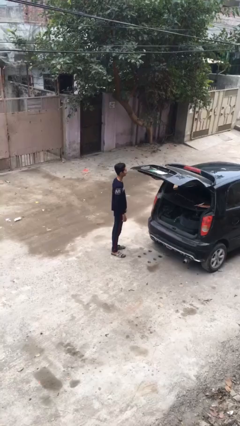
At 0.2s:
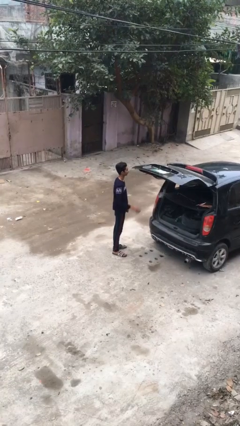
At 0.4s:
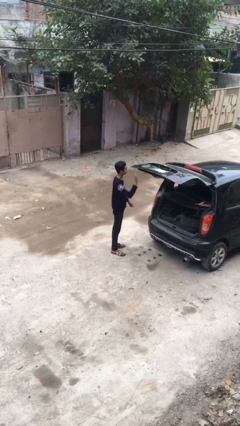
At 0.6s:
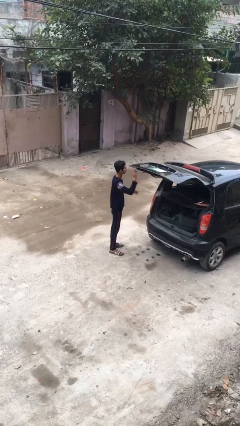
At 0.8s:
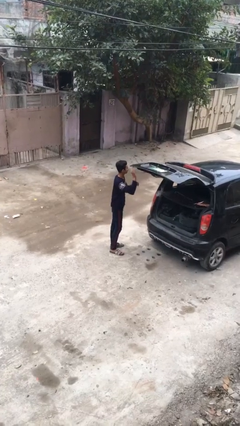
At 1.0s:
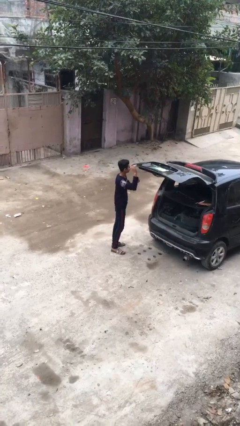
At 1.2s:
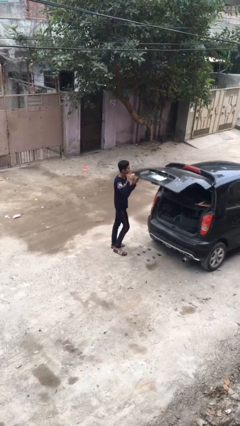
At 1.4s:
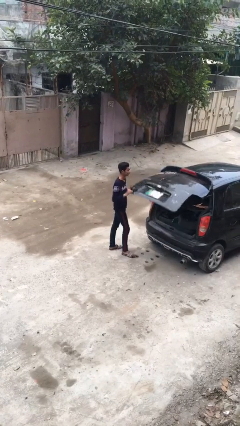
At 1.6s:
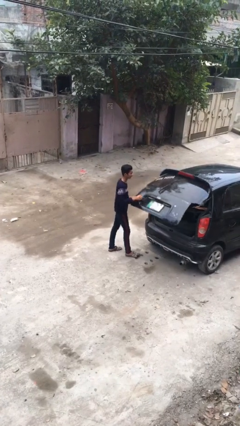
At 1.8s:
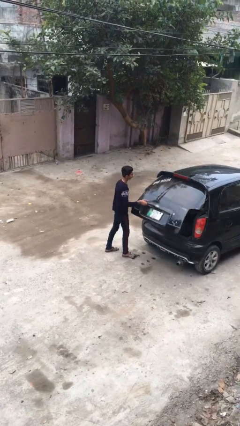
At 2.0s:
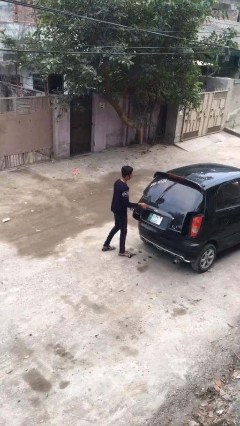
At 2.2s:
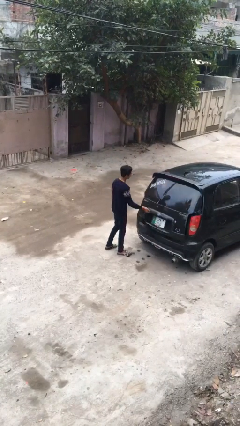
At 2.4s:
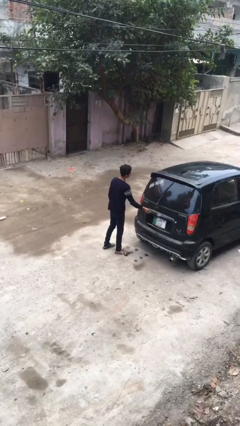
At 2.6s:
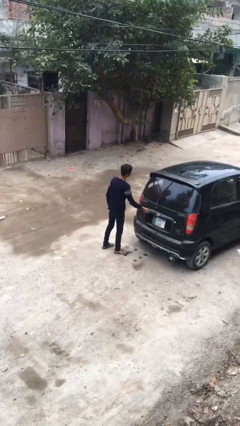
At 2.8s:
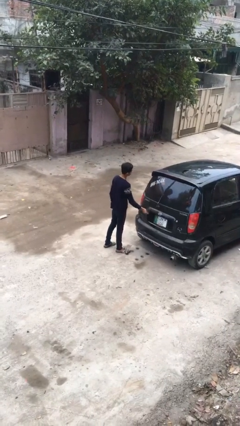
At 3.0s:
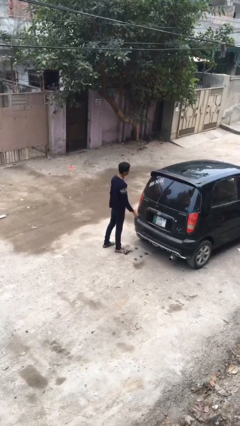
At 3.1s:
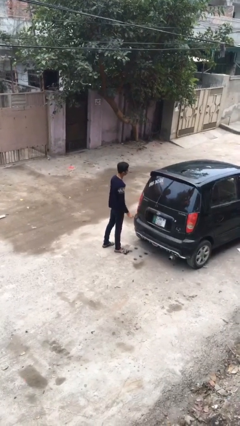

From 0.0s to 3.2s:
person closes car trunk

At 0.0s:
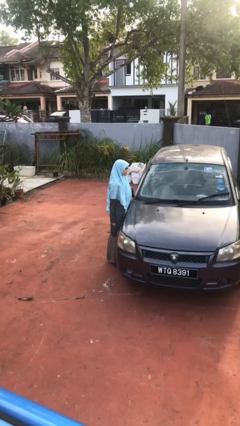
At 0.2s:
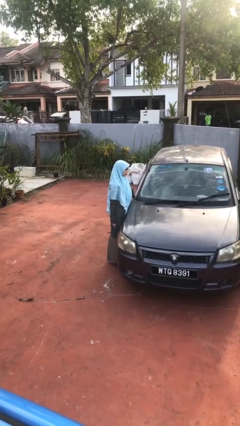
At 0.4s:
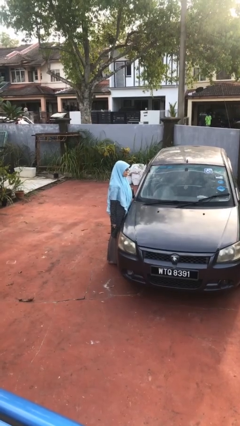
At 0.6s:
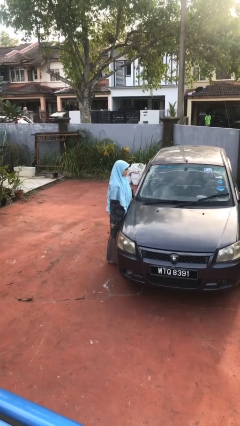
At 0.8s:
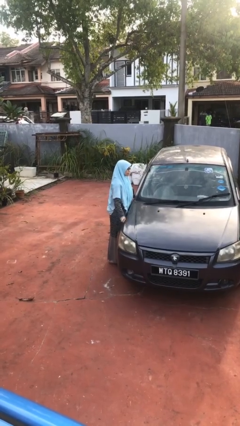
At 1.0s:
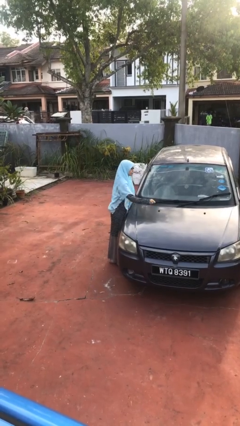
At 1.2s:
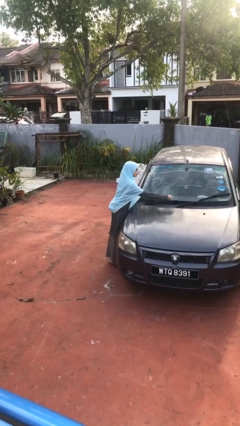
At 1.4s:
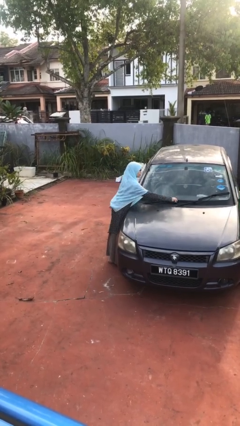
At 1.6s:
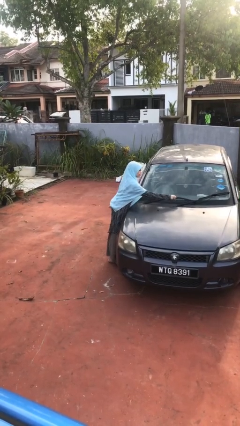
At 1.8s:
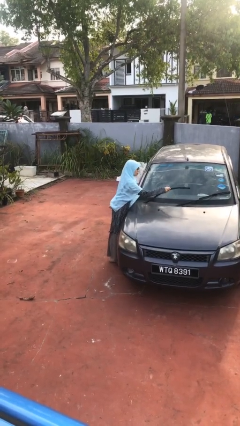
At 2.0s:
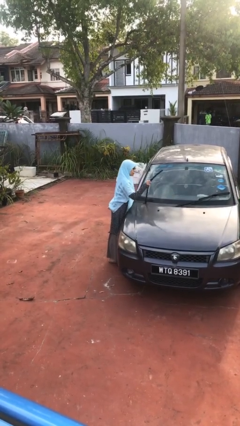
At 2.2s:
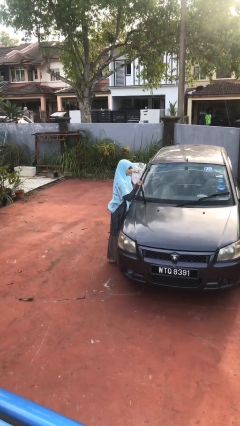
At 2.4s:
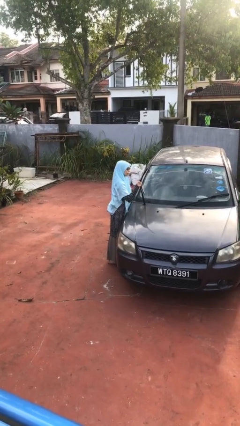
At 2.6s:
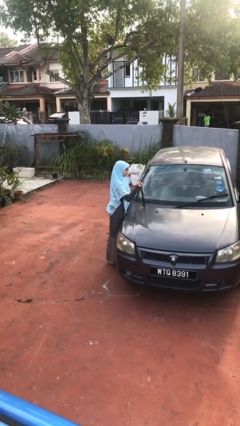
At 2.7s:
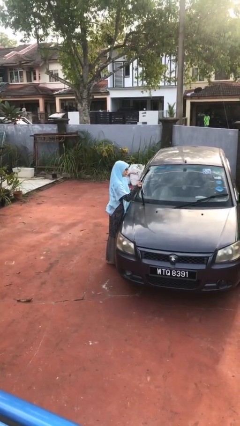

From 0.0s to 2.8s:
person flips up car wipers

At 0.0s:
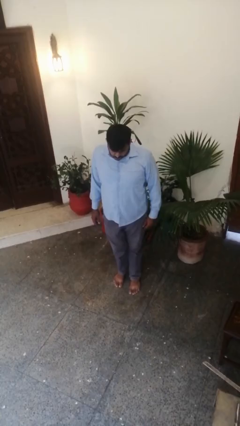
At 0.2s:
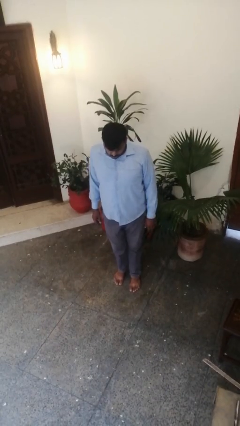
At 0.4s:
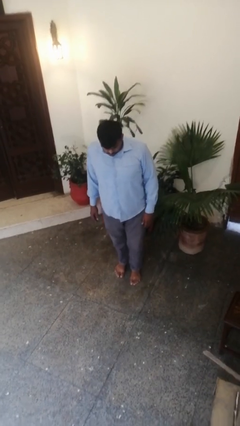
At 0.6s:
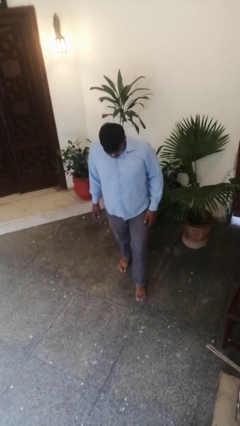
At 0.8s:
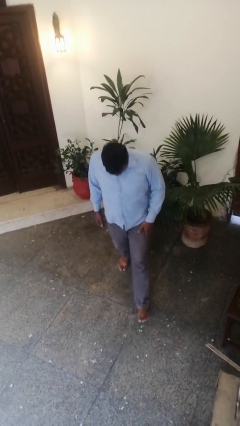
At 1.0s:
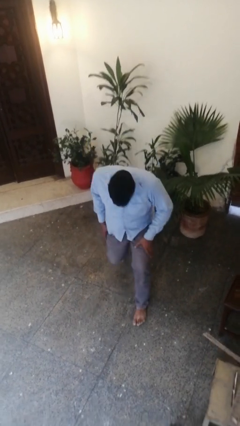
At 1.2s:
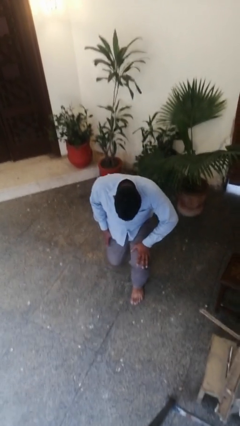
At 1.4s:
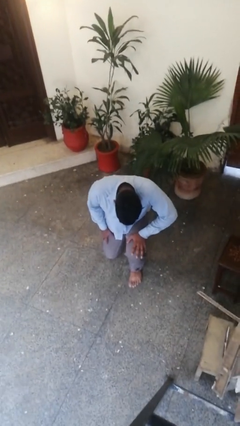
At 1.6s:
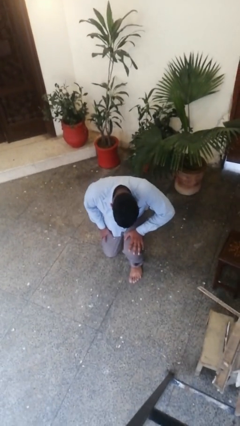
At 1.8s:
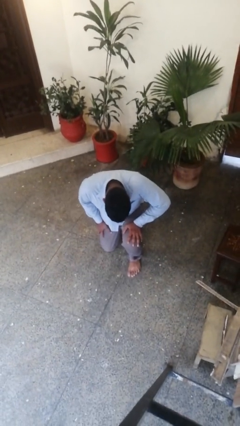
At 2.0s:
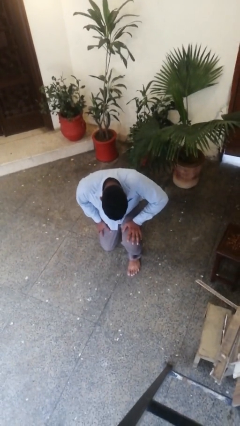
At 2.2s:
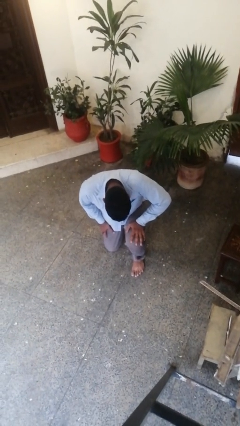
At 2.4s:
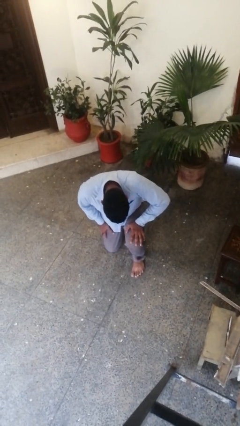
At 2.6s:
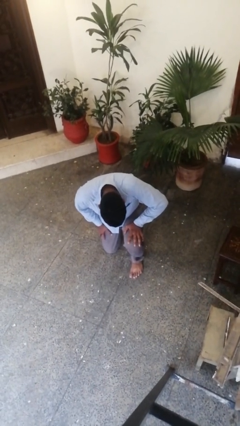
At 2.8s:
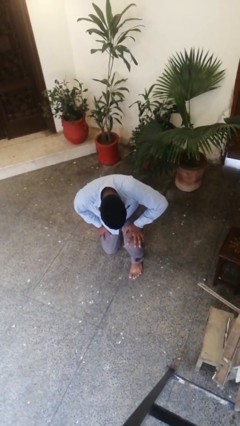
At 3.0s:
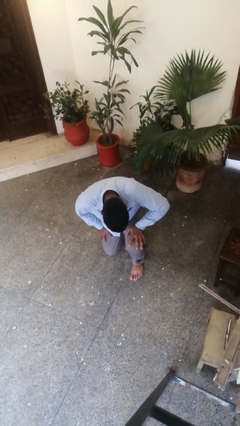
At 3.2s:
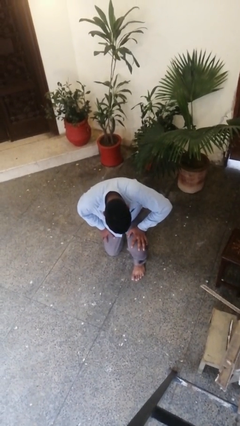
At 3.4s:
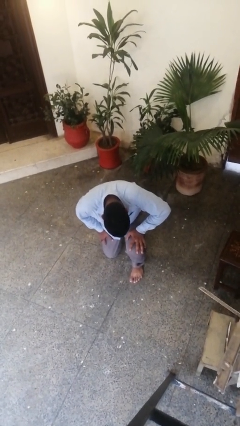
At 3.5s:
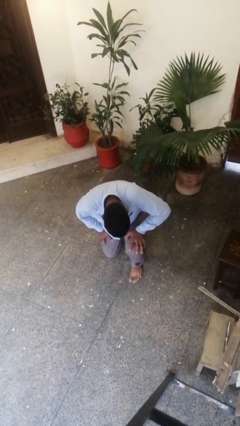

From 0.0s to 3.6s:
person kneels

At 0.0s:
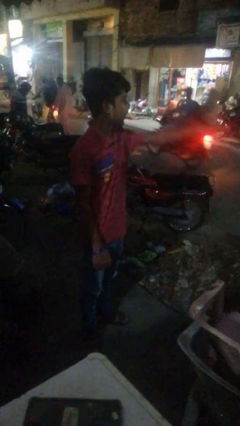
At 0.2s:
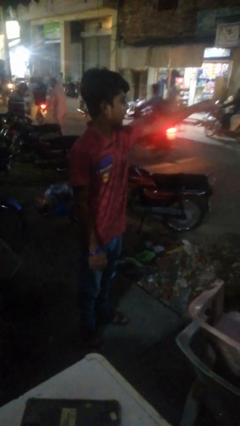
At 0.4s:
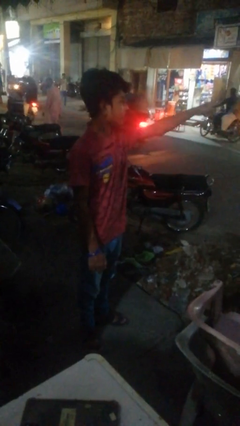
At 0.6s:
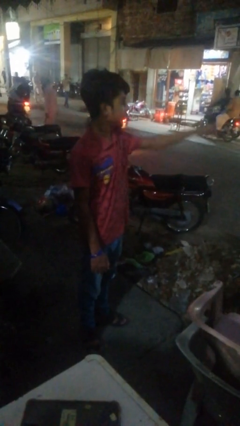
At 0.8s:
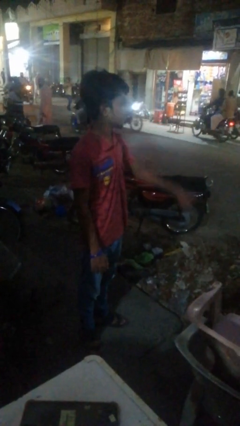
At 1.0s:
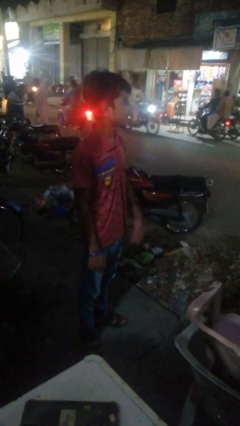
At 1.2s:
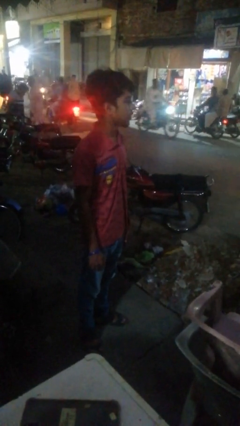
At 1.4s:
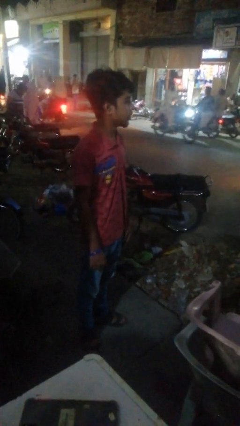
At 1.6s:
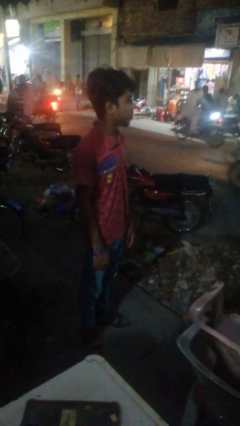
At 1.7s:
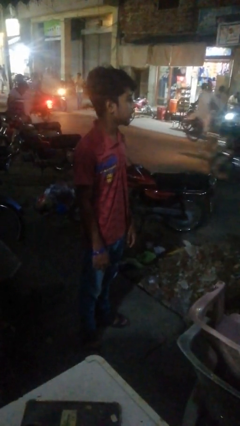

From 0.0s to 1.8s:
person points at person

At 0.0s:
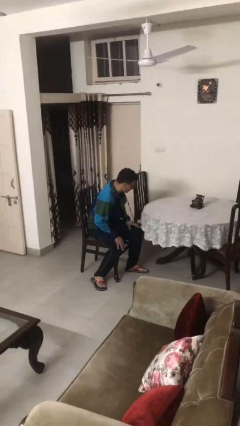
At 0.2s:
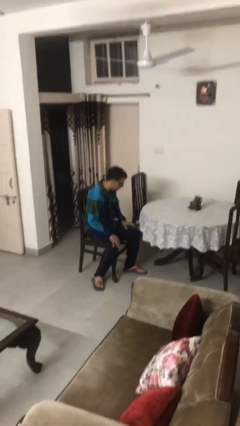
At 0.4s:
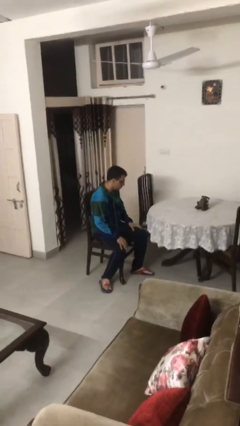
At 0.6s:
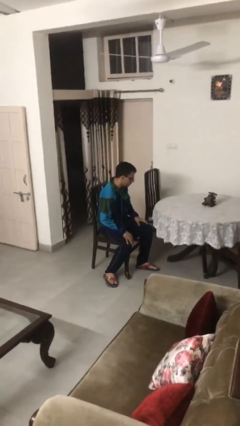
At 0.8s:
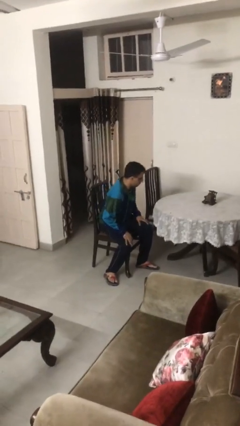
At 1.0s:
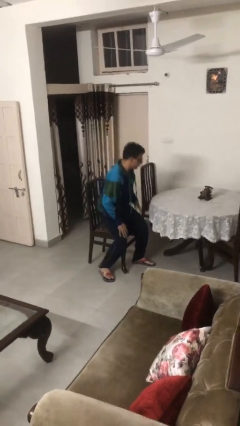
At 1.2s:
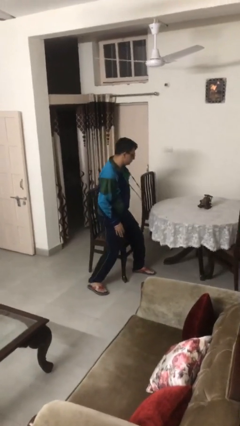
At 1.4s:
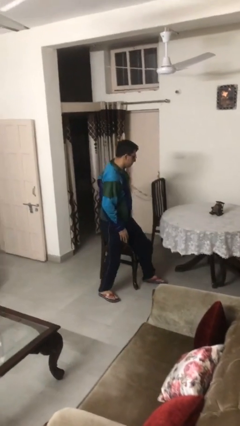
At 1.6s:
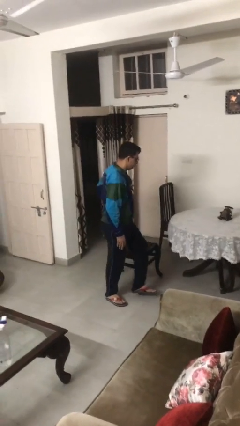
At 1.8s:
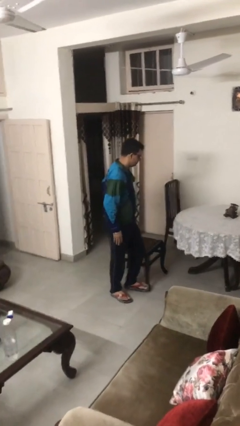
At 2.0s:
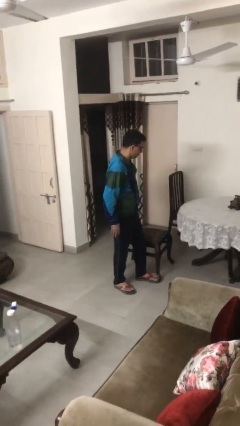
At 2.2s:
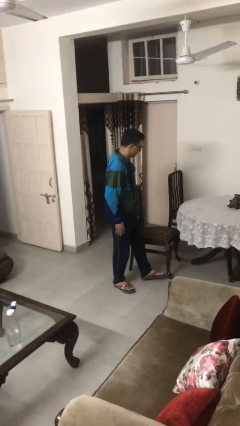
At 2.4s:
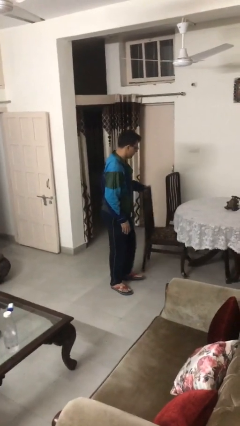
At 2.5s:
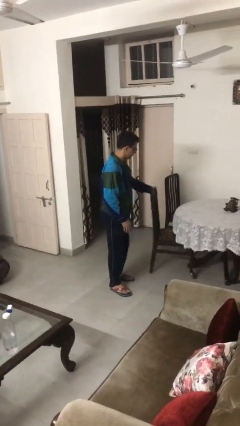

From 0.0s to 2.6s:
person stands up

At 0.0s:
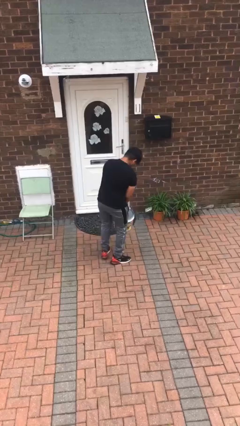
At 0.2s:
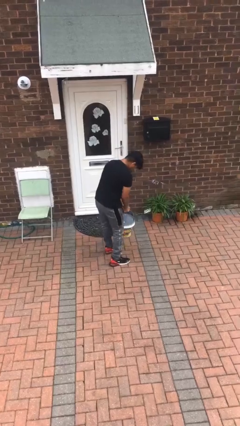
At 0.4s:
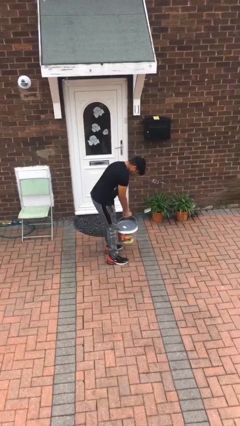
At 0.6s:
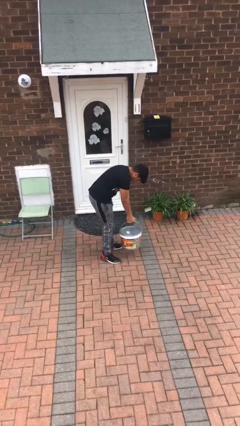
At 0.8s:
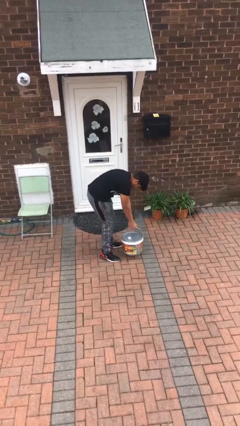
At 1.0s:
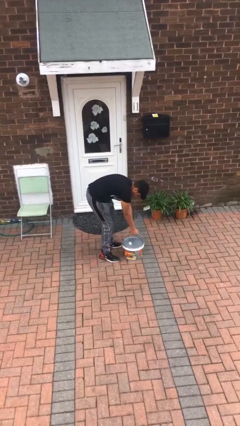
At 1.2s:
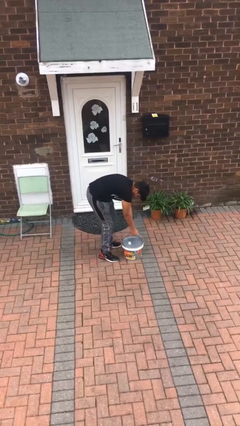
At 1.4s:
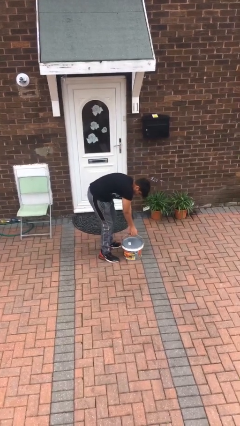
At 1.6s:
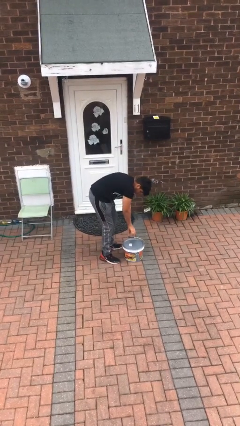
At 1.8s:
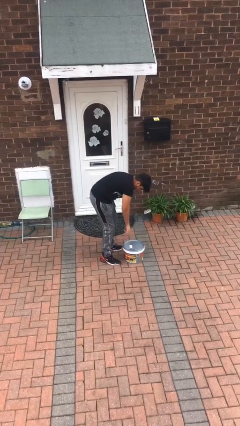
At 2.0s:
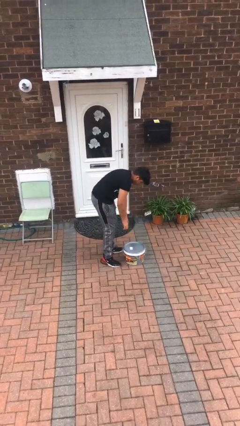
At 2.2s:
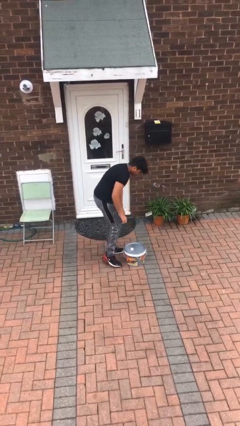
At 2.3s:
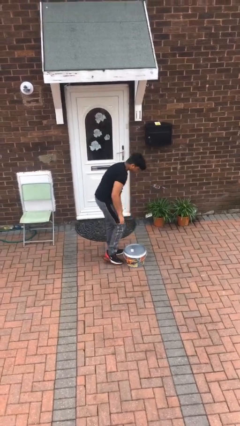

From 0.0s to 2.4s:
person puts down object on floor

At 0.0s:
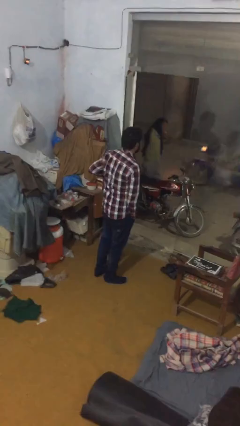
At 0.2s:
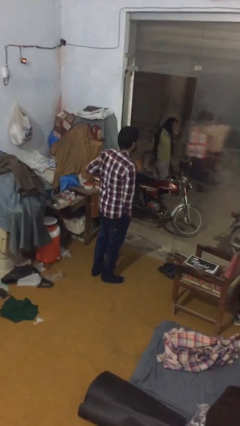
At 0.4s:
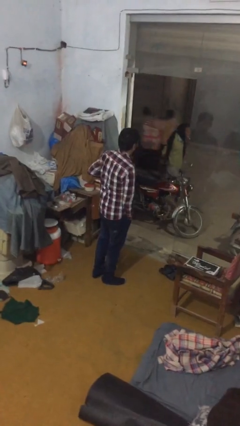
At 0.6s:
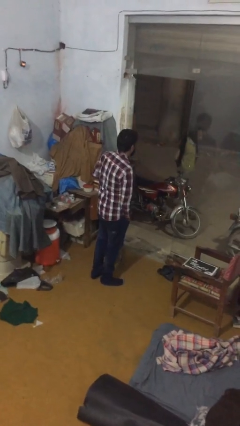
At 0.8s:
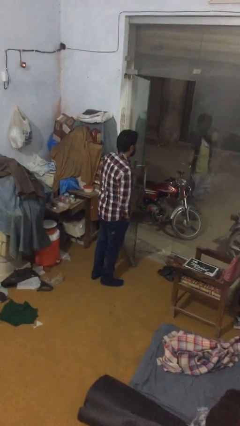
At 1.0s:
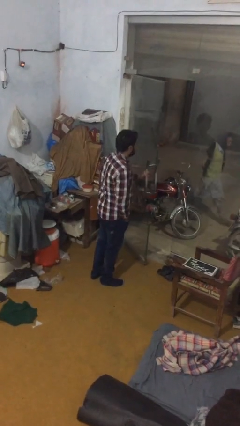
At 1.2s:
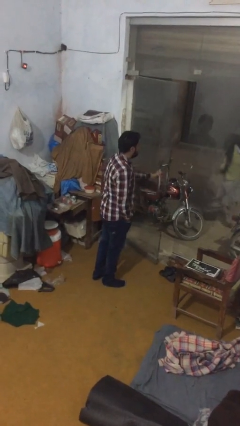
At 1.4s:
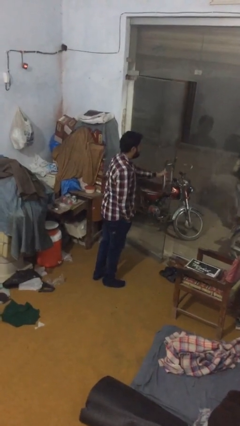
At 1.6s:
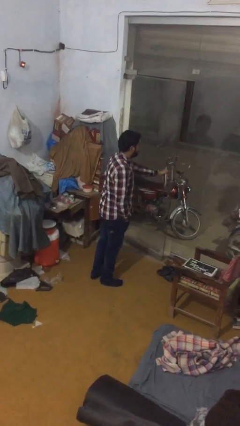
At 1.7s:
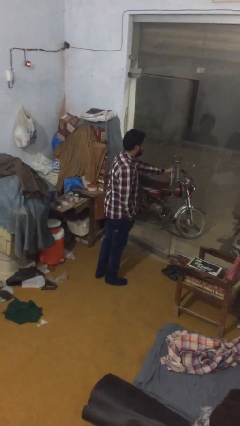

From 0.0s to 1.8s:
person closes facility door
